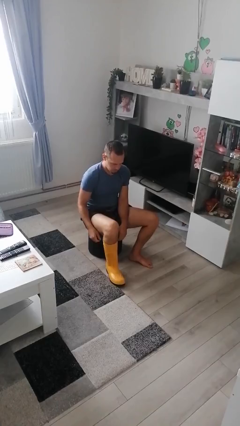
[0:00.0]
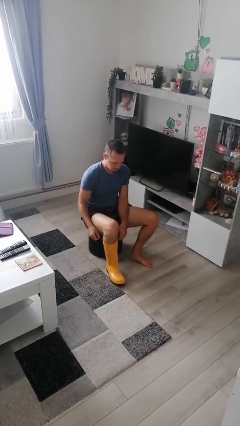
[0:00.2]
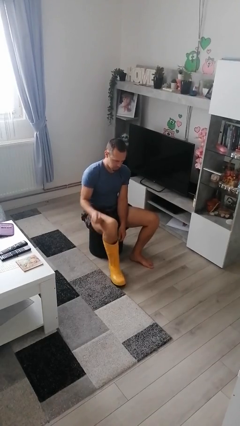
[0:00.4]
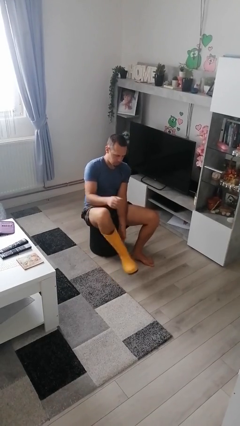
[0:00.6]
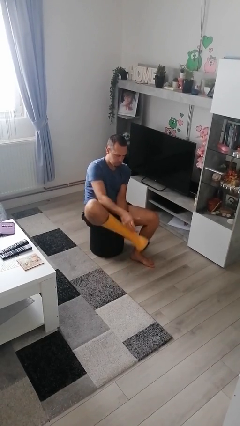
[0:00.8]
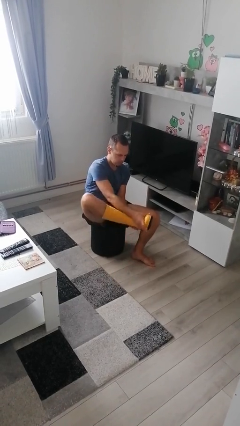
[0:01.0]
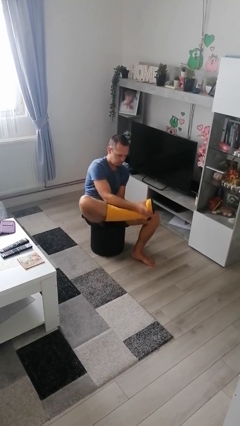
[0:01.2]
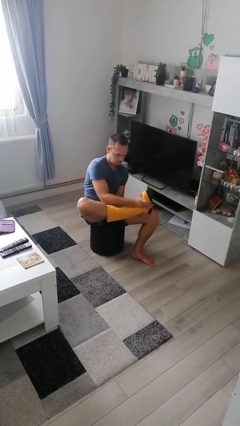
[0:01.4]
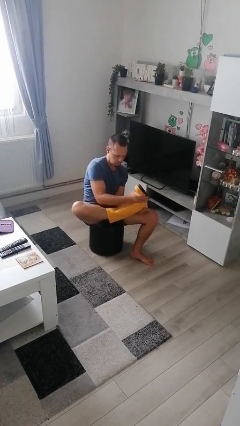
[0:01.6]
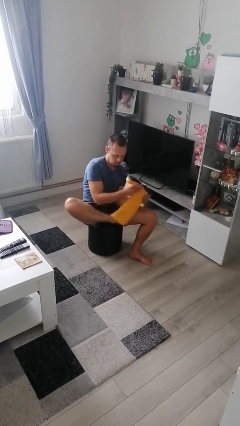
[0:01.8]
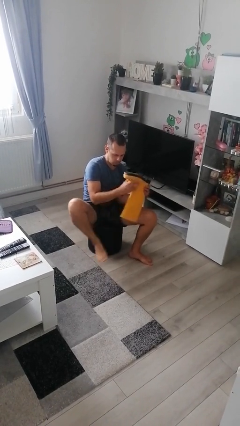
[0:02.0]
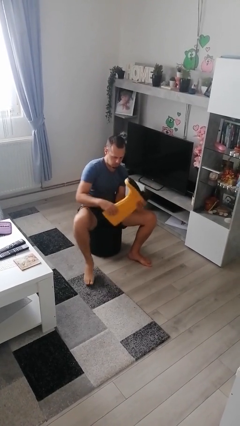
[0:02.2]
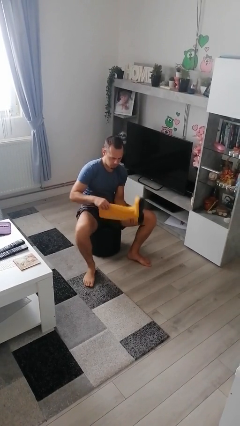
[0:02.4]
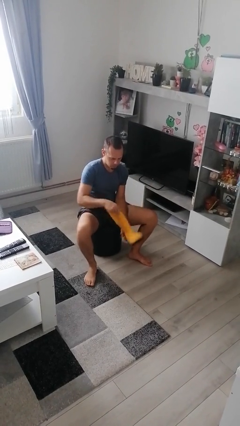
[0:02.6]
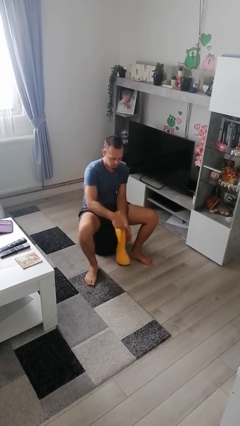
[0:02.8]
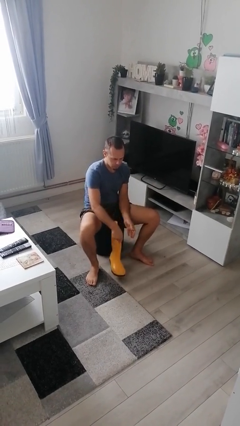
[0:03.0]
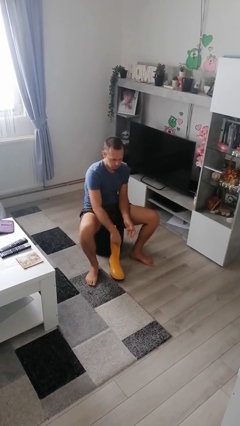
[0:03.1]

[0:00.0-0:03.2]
person takes off boots

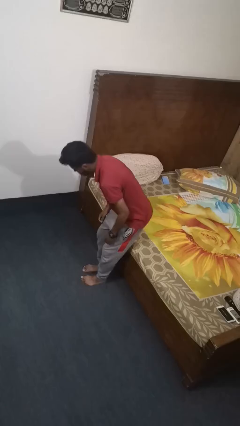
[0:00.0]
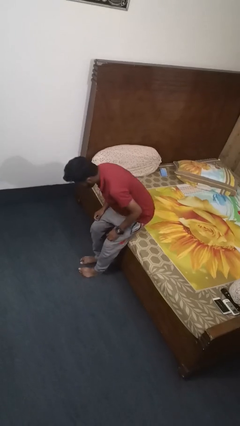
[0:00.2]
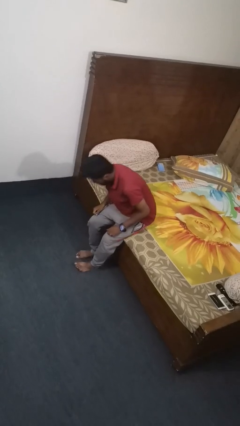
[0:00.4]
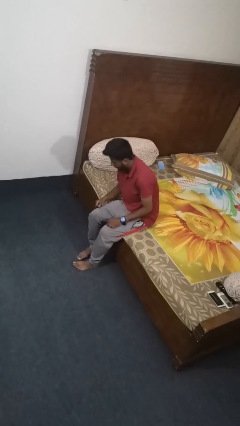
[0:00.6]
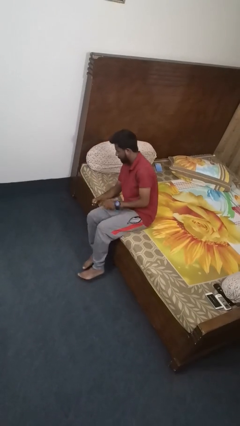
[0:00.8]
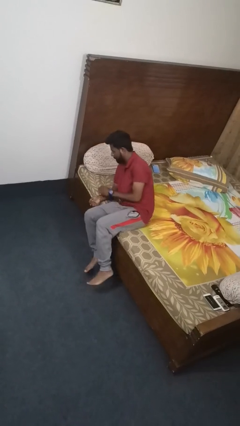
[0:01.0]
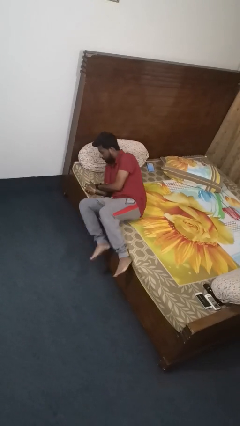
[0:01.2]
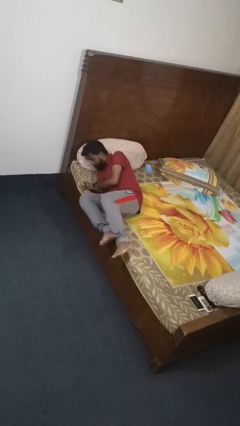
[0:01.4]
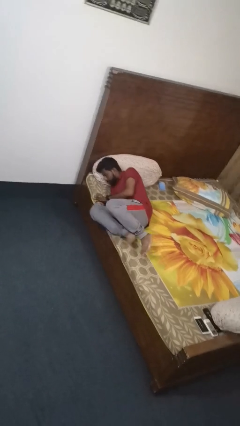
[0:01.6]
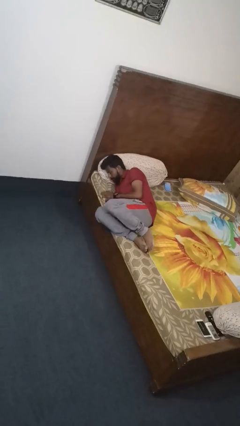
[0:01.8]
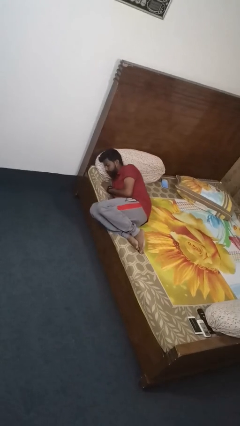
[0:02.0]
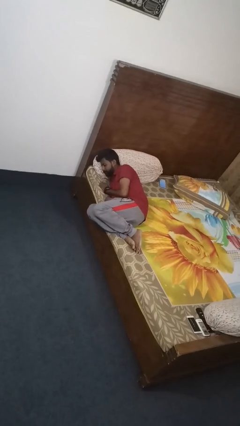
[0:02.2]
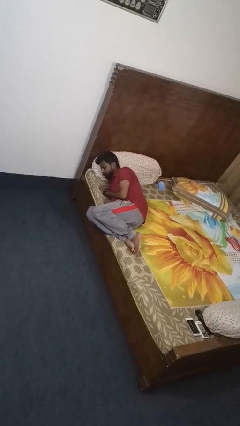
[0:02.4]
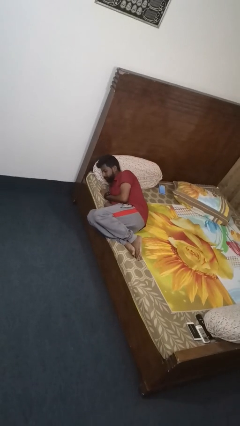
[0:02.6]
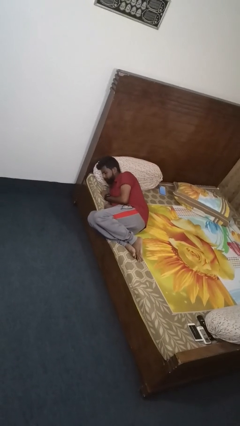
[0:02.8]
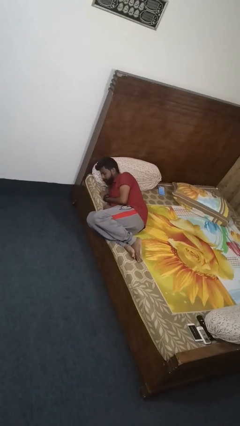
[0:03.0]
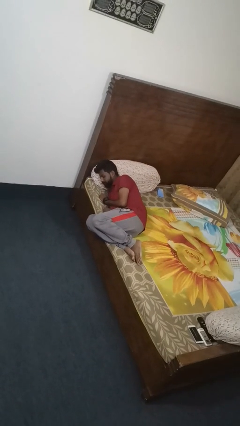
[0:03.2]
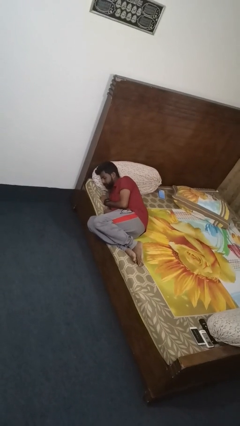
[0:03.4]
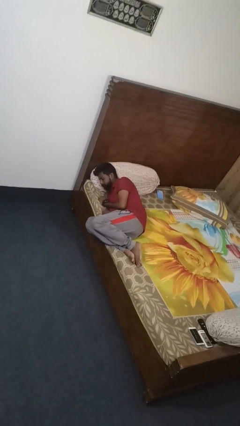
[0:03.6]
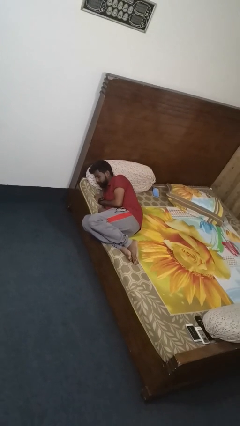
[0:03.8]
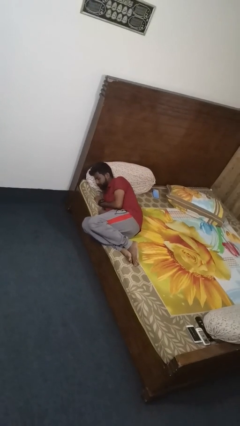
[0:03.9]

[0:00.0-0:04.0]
person lies down on bed

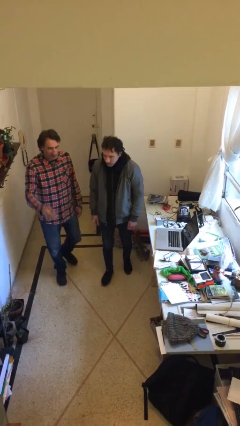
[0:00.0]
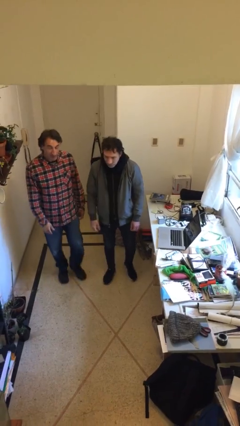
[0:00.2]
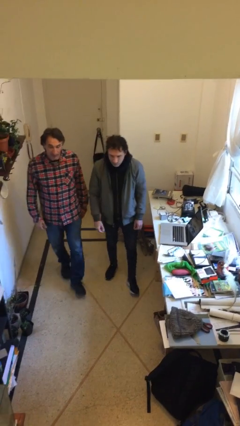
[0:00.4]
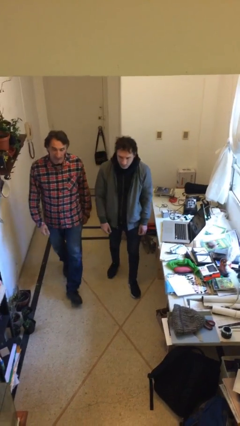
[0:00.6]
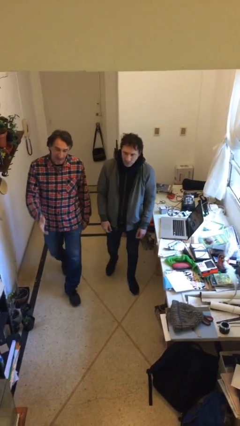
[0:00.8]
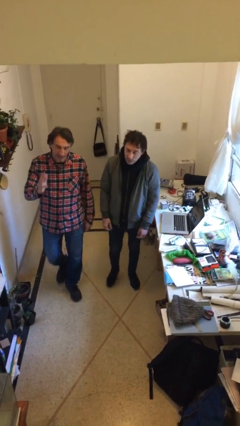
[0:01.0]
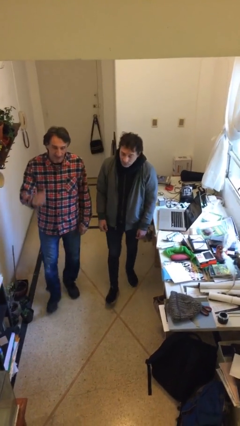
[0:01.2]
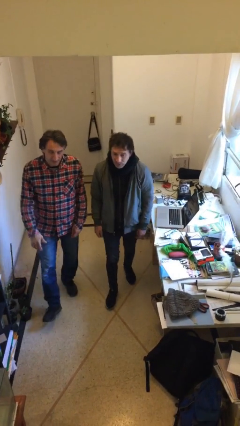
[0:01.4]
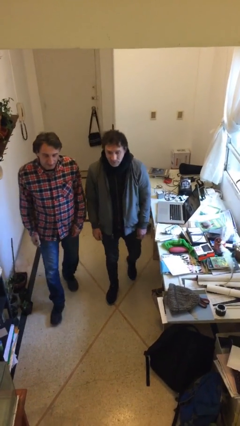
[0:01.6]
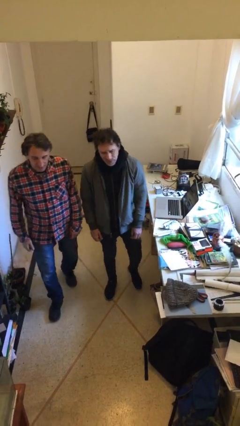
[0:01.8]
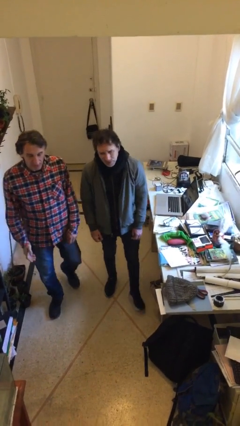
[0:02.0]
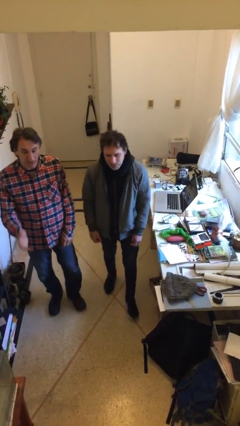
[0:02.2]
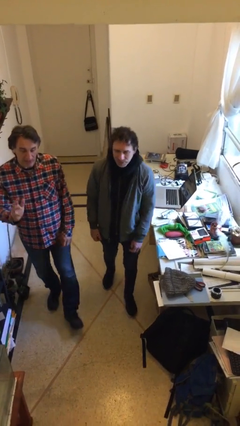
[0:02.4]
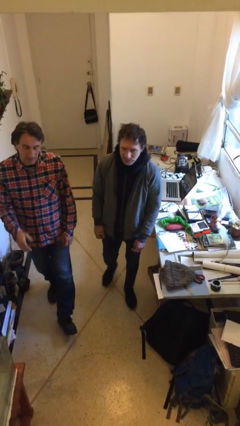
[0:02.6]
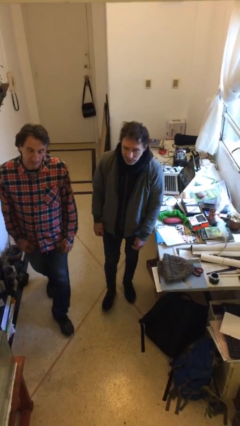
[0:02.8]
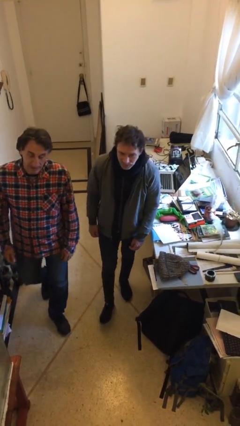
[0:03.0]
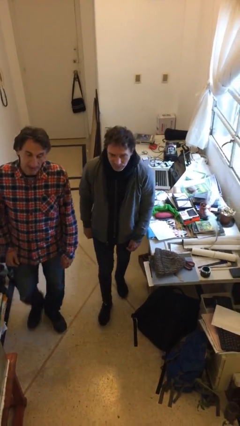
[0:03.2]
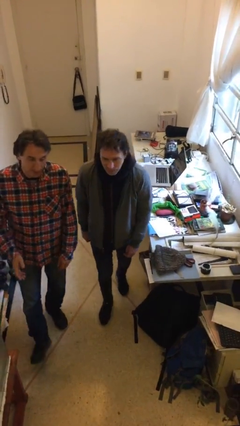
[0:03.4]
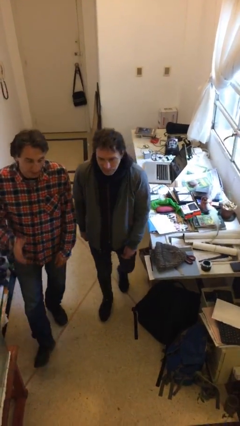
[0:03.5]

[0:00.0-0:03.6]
person talks to person

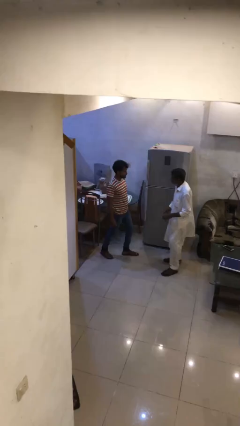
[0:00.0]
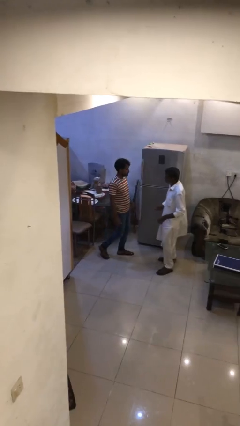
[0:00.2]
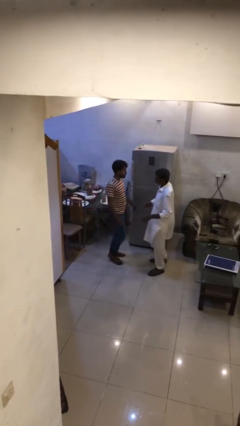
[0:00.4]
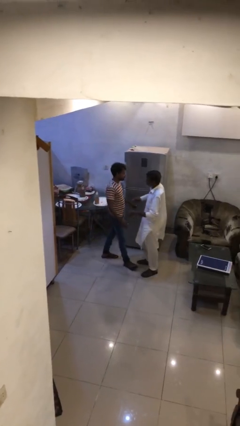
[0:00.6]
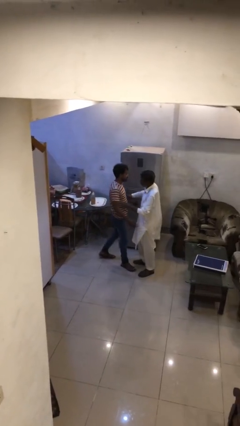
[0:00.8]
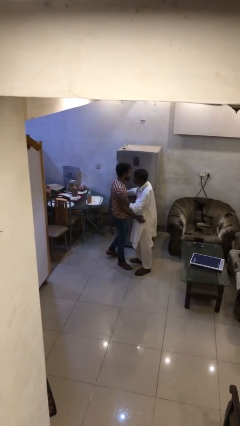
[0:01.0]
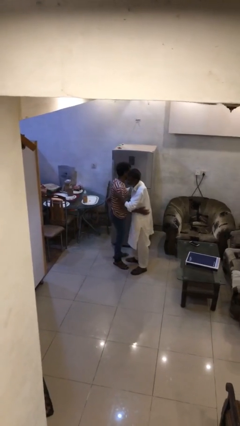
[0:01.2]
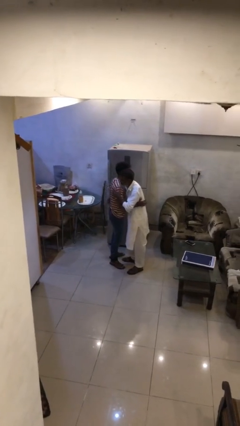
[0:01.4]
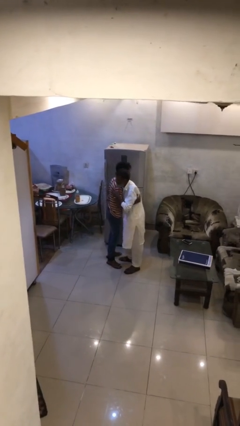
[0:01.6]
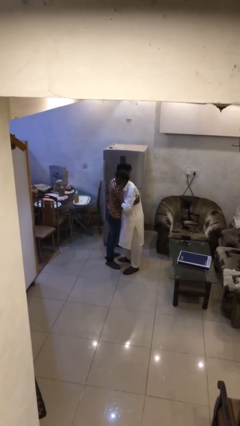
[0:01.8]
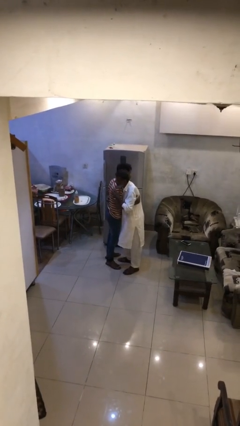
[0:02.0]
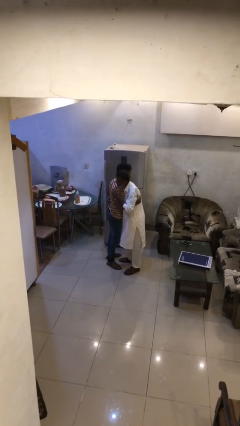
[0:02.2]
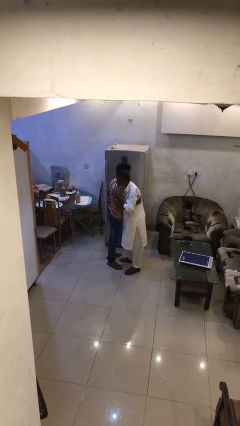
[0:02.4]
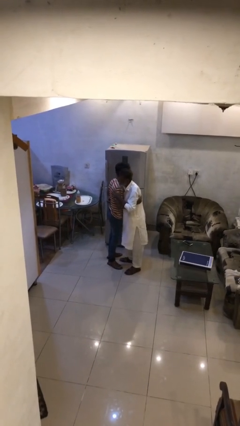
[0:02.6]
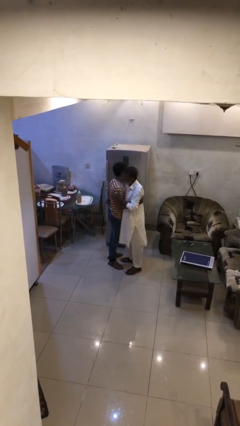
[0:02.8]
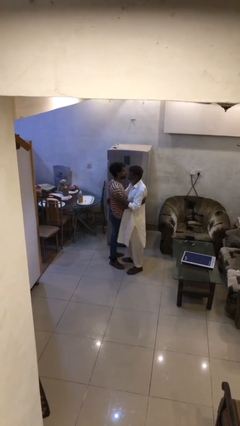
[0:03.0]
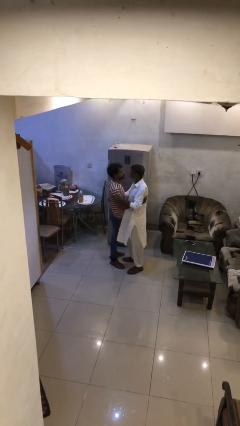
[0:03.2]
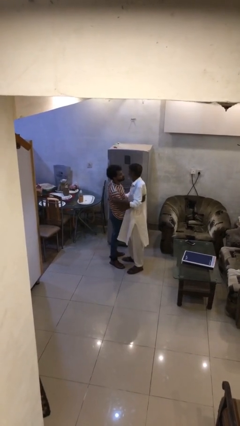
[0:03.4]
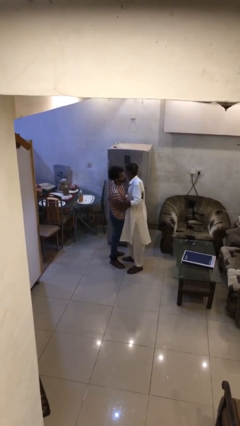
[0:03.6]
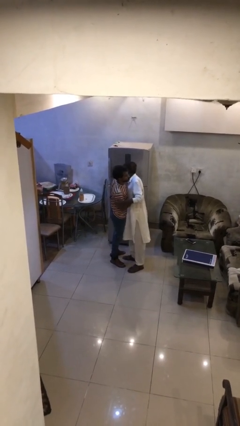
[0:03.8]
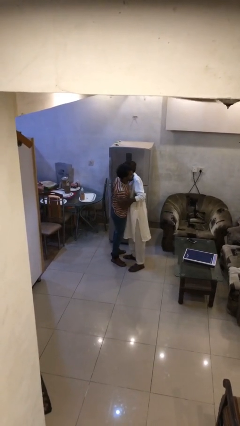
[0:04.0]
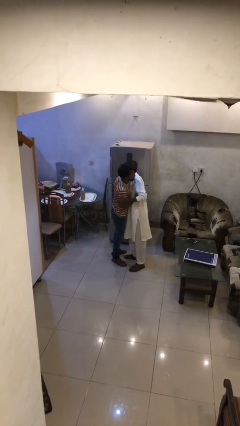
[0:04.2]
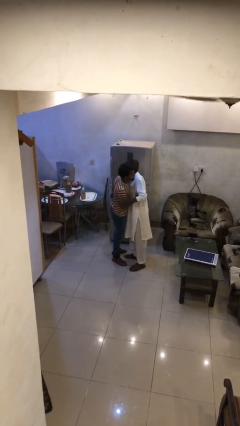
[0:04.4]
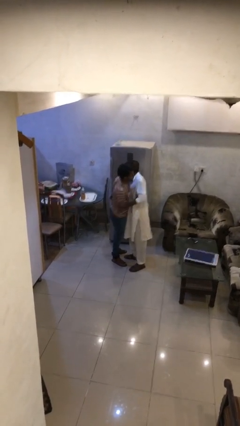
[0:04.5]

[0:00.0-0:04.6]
person embraces person

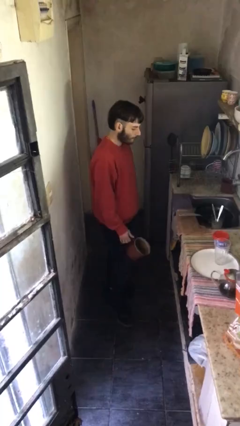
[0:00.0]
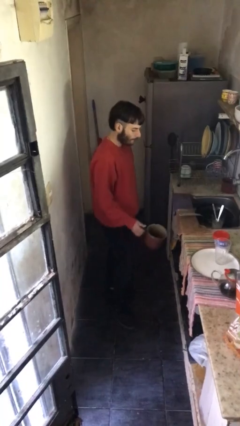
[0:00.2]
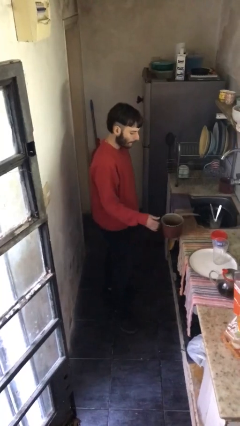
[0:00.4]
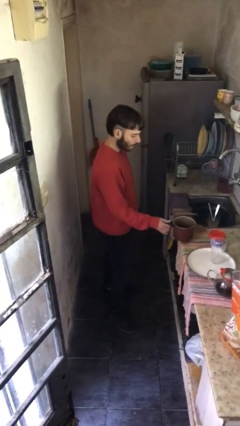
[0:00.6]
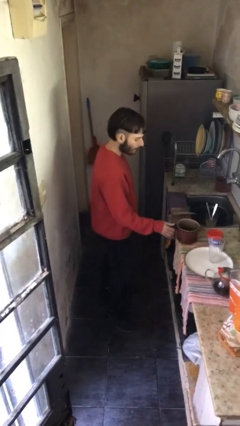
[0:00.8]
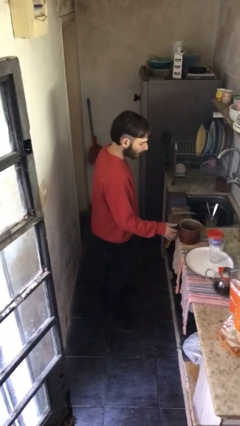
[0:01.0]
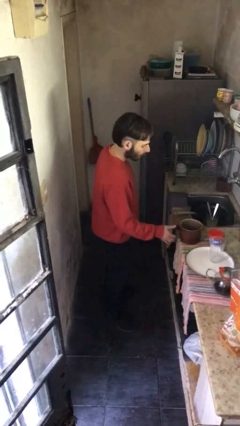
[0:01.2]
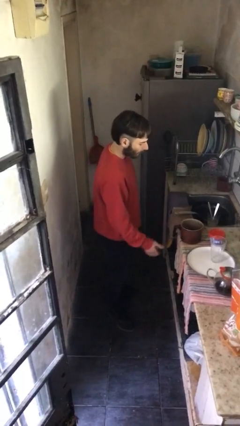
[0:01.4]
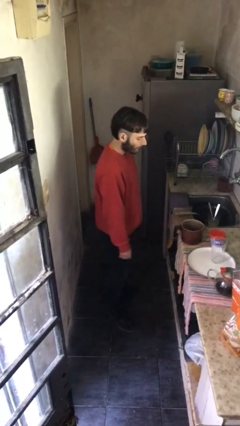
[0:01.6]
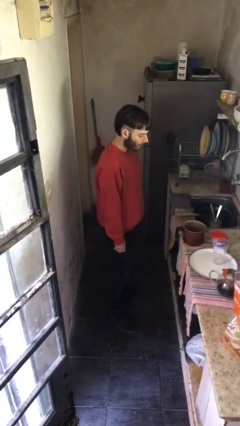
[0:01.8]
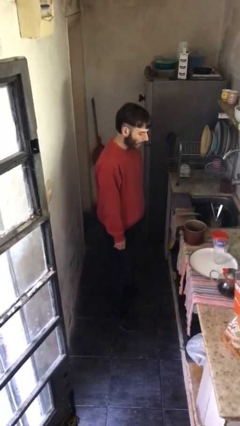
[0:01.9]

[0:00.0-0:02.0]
person puts down object on countertop
